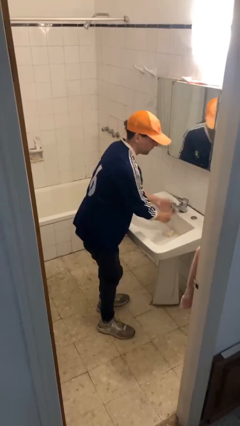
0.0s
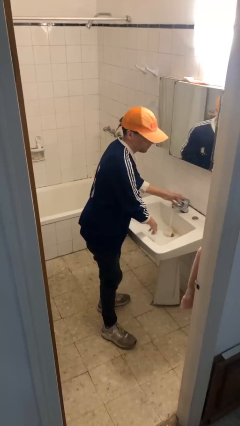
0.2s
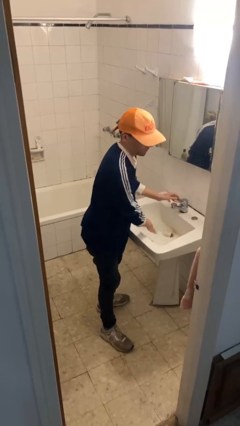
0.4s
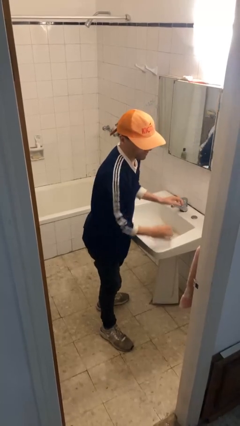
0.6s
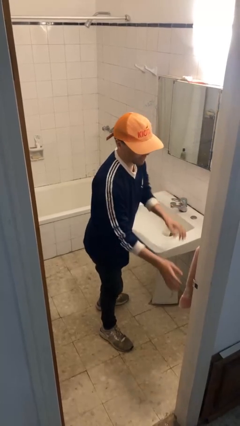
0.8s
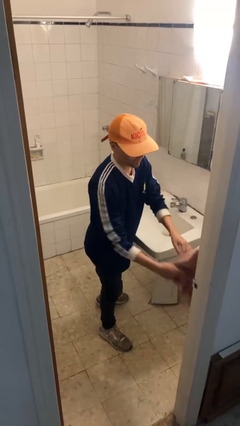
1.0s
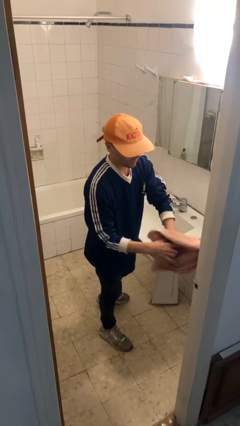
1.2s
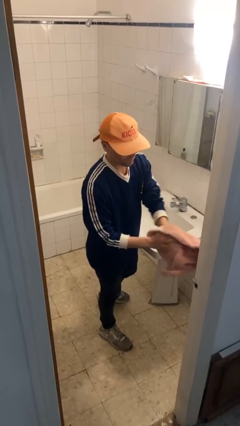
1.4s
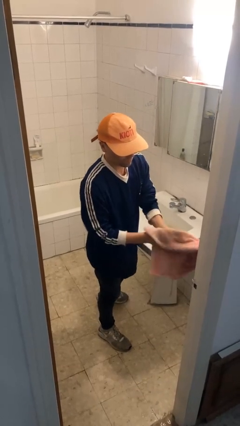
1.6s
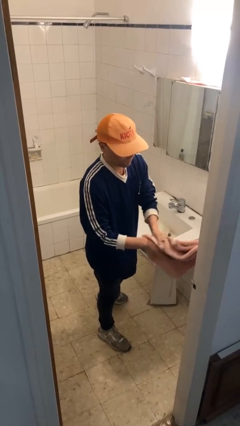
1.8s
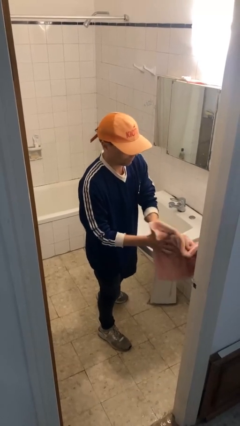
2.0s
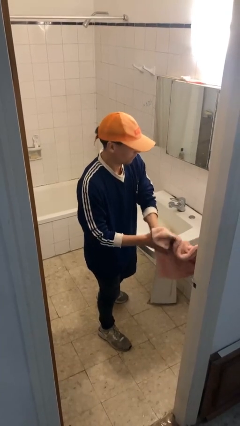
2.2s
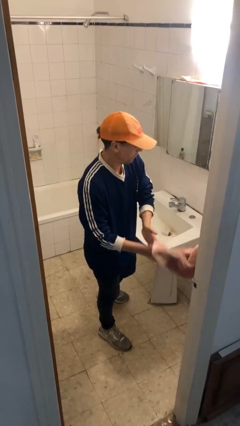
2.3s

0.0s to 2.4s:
person dries hands with towel

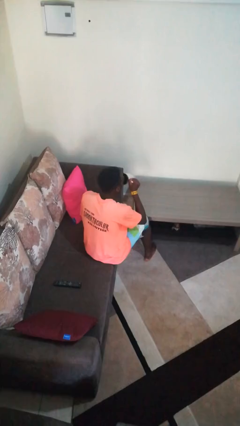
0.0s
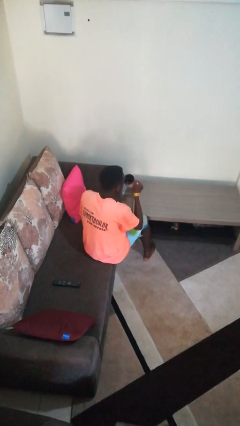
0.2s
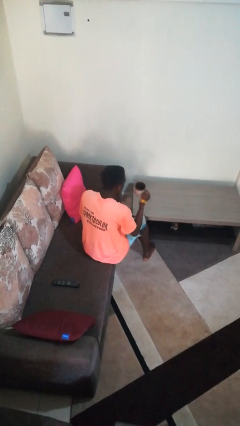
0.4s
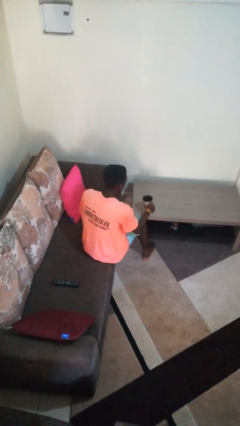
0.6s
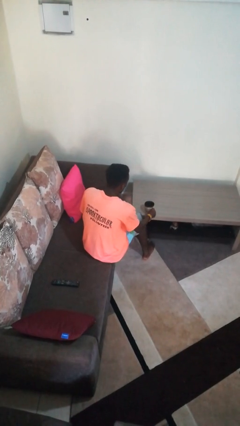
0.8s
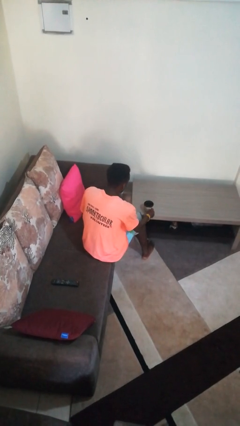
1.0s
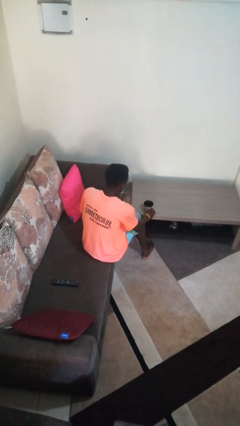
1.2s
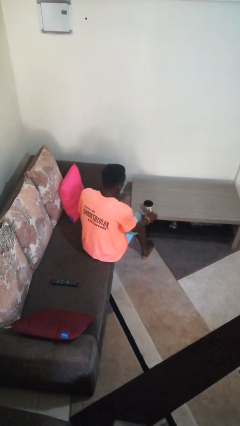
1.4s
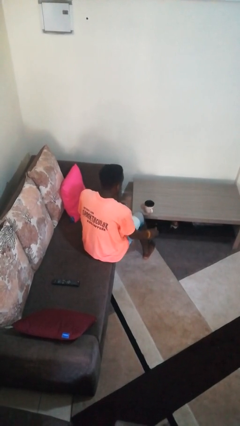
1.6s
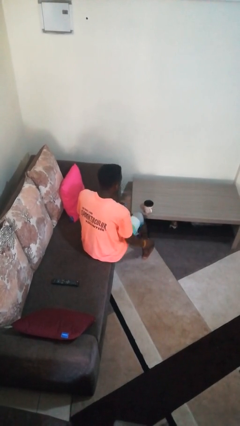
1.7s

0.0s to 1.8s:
person puts down object on table

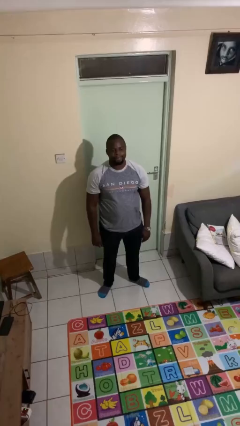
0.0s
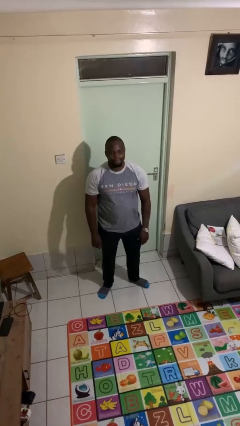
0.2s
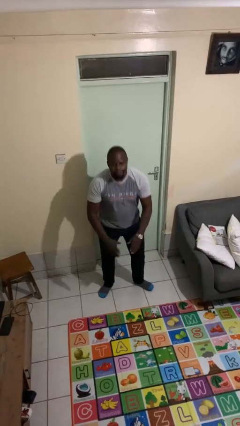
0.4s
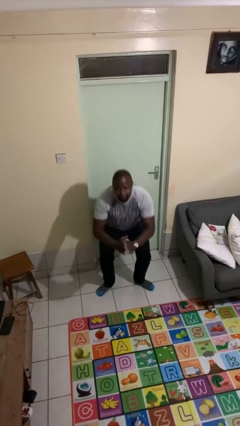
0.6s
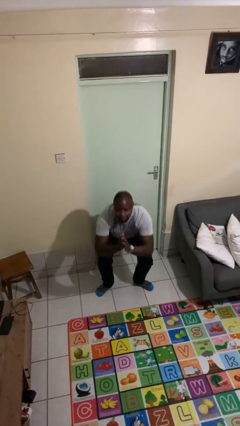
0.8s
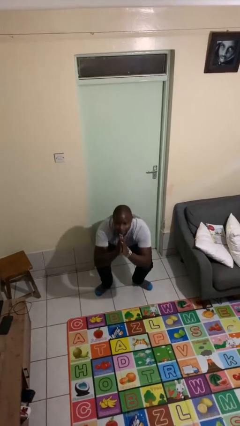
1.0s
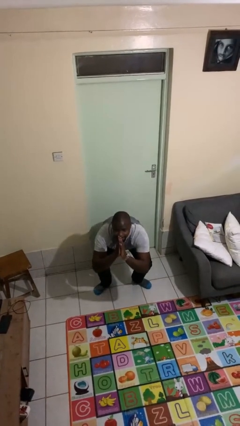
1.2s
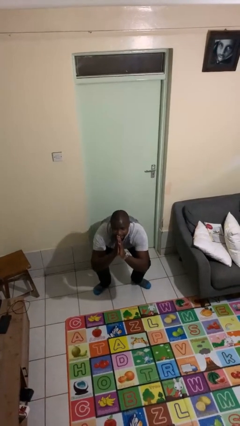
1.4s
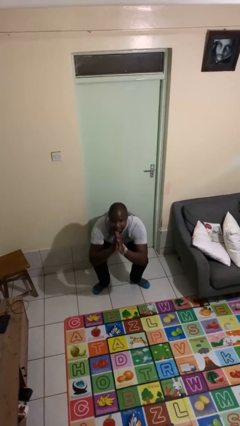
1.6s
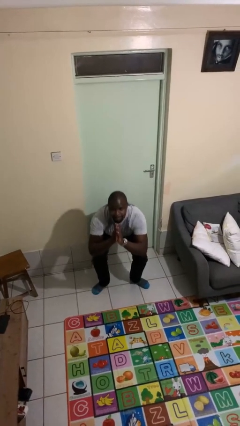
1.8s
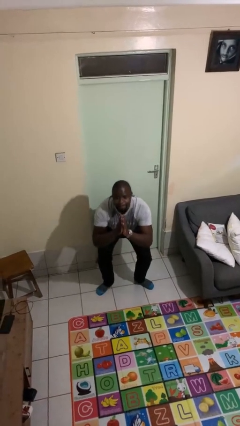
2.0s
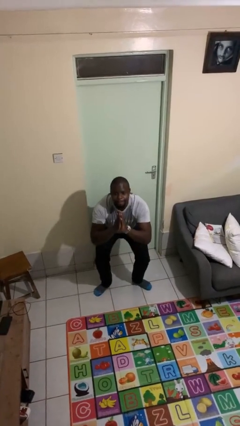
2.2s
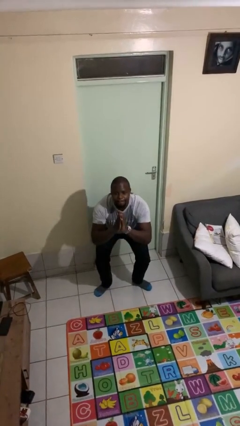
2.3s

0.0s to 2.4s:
person squats

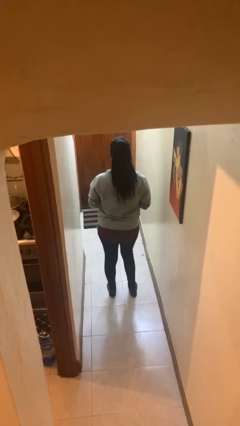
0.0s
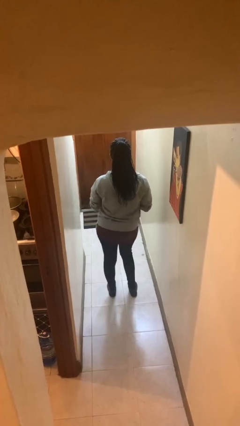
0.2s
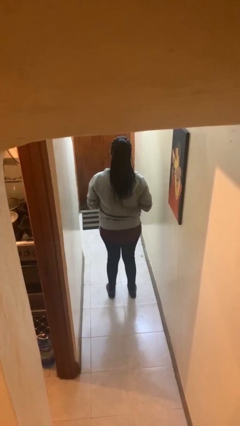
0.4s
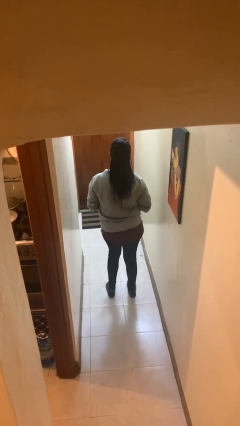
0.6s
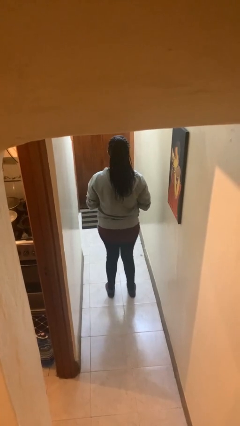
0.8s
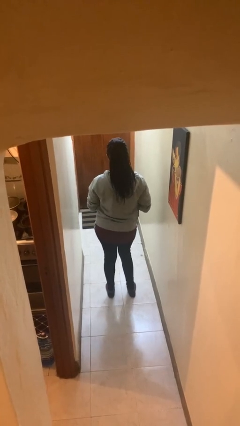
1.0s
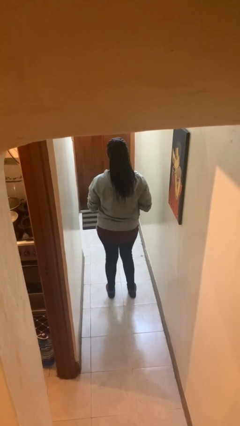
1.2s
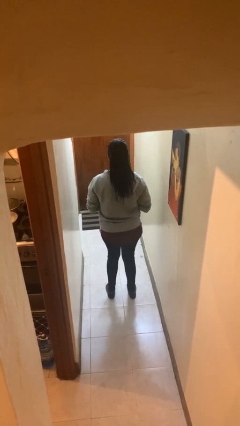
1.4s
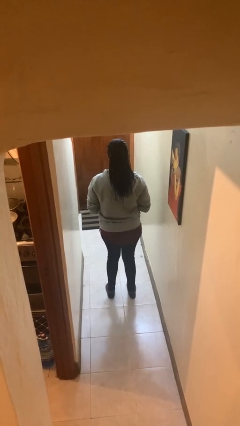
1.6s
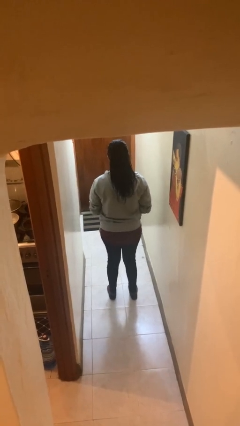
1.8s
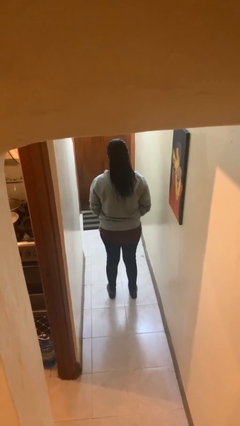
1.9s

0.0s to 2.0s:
person wiggles hips

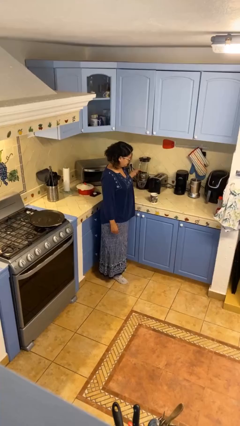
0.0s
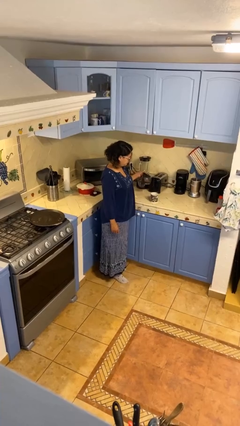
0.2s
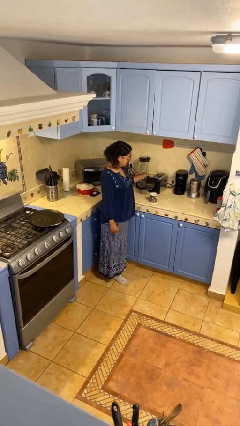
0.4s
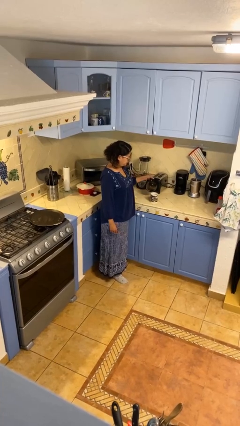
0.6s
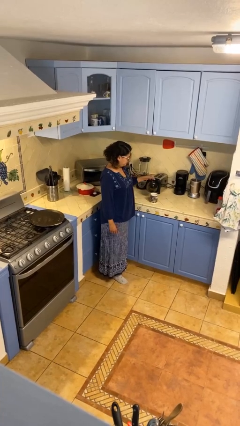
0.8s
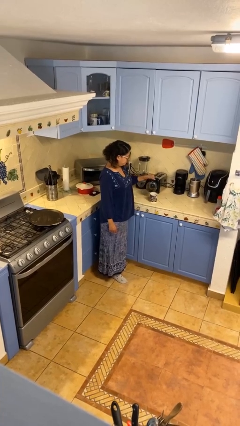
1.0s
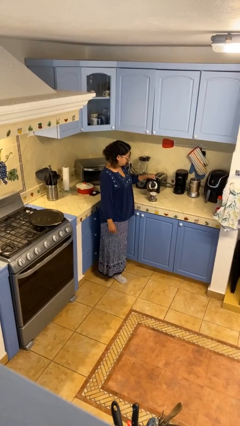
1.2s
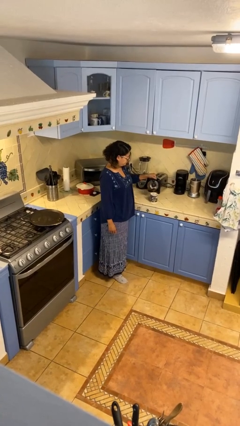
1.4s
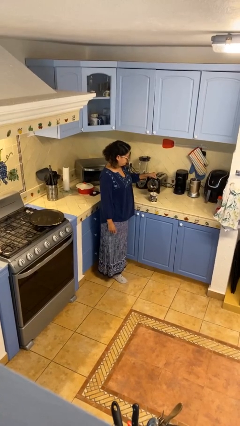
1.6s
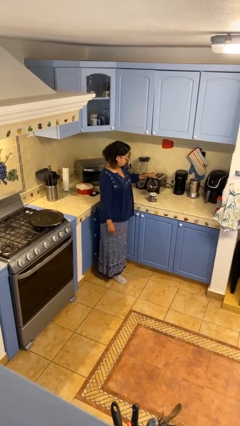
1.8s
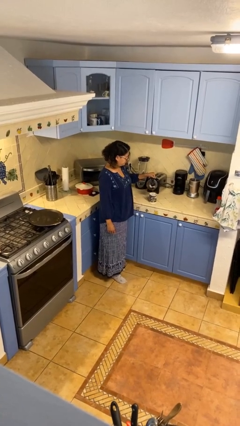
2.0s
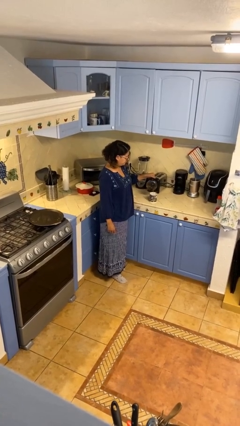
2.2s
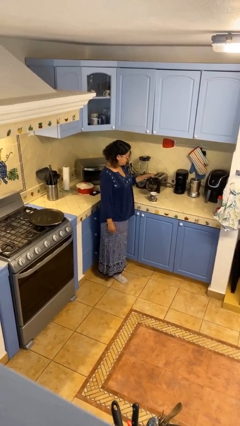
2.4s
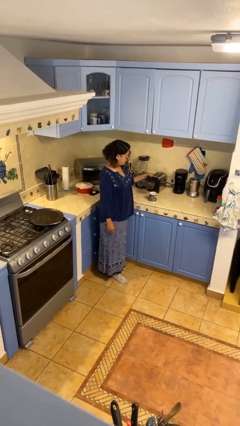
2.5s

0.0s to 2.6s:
person pours coffee into mug

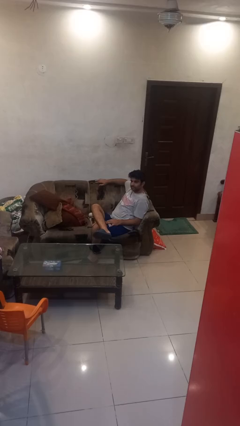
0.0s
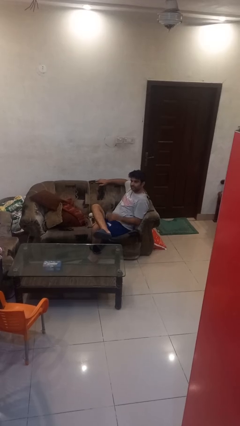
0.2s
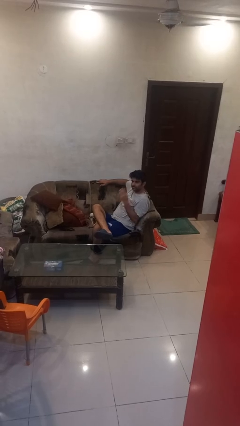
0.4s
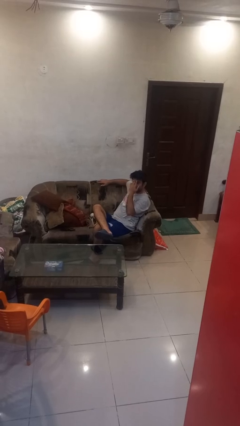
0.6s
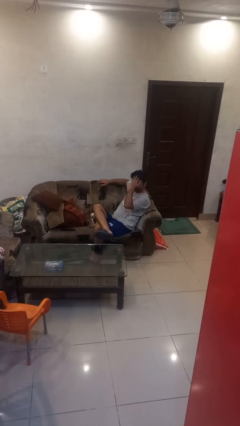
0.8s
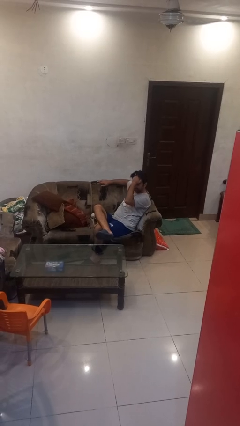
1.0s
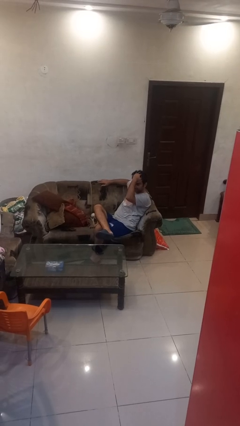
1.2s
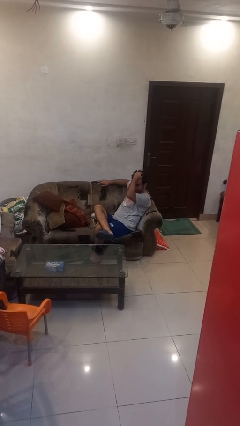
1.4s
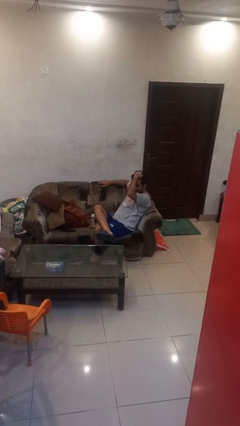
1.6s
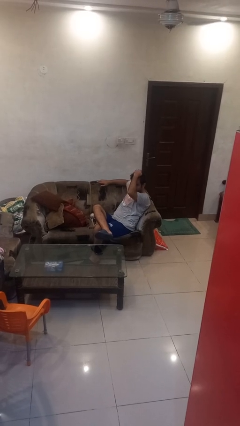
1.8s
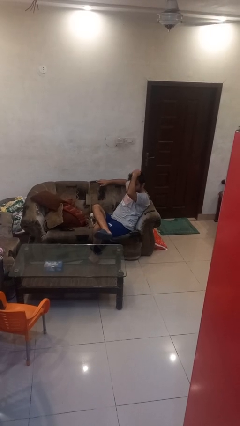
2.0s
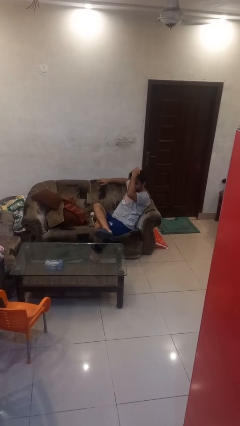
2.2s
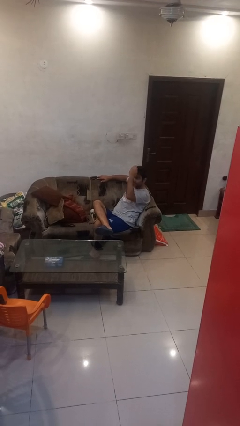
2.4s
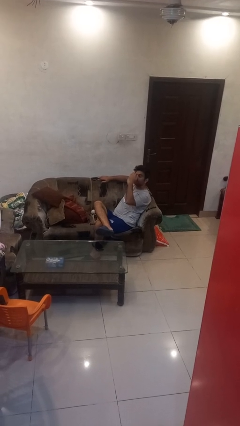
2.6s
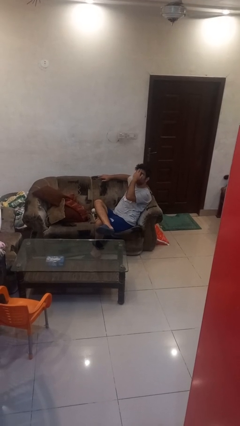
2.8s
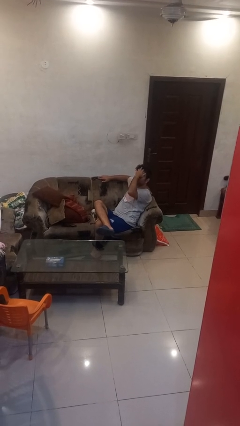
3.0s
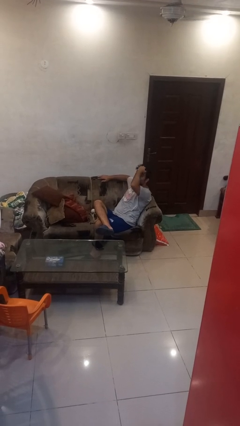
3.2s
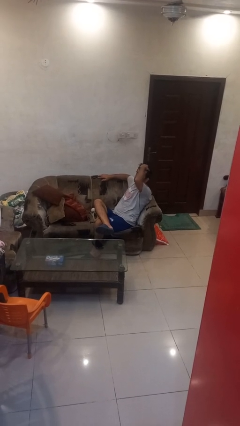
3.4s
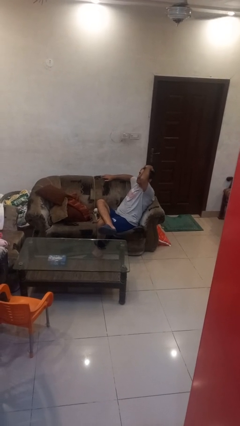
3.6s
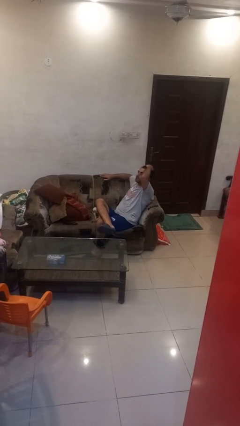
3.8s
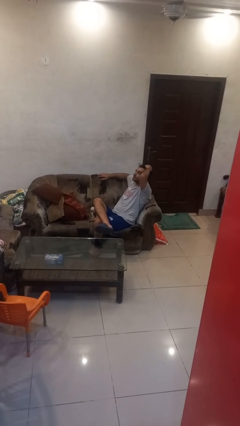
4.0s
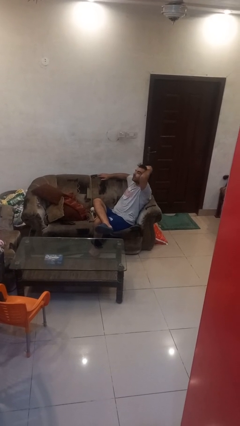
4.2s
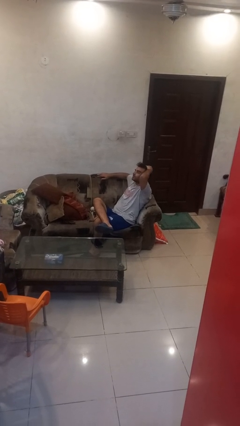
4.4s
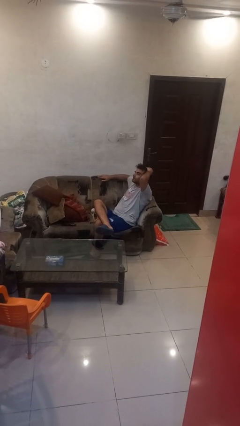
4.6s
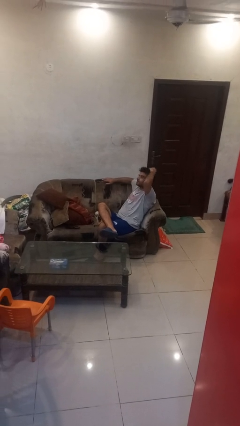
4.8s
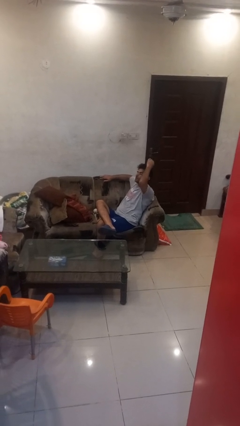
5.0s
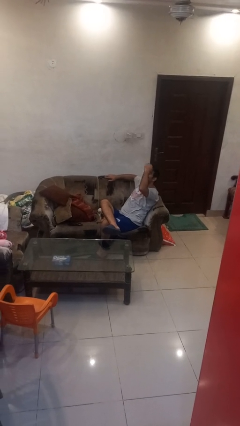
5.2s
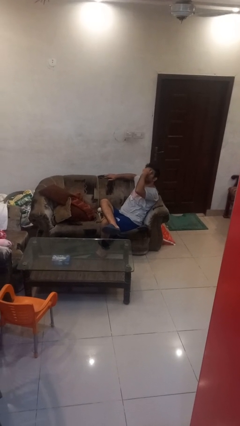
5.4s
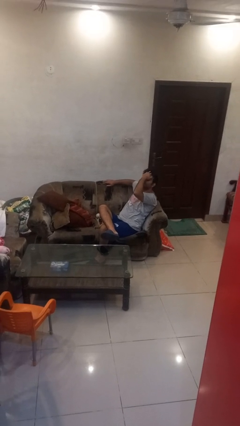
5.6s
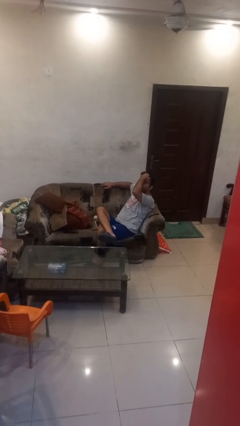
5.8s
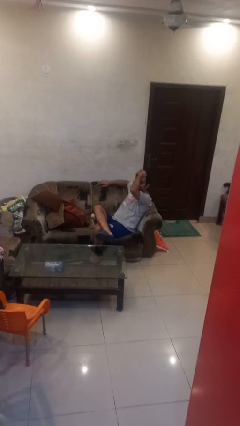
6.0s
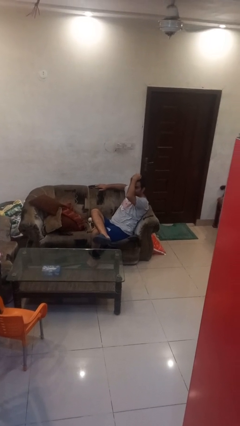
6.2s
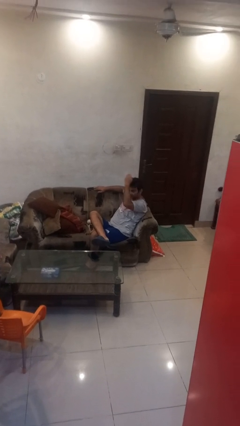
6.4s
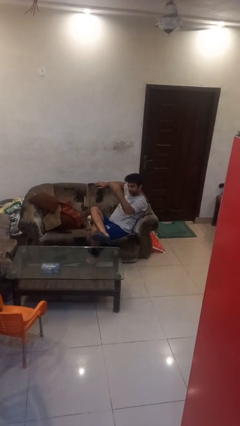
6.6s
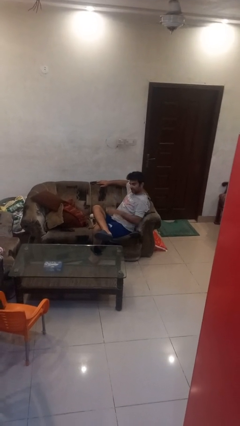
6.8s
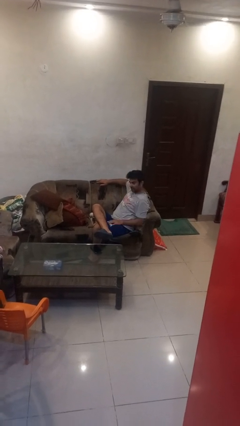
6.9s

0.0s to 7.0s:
person strokes hair
